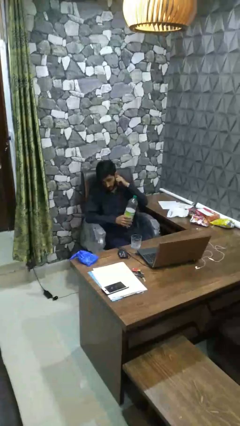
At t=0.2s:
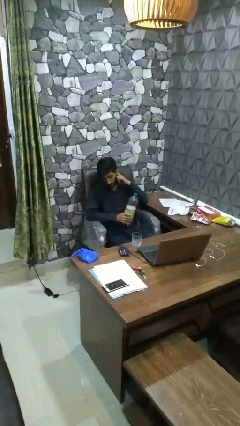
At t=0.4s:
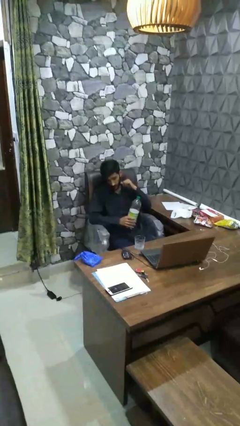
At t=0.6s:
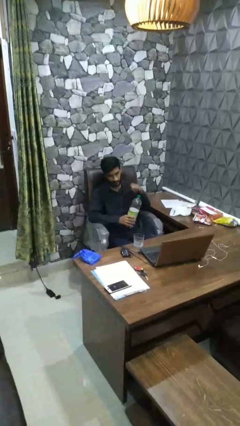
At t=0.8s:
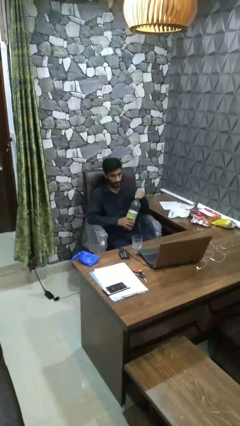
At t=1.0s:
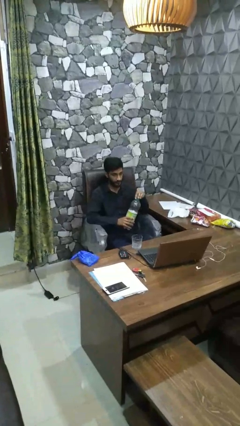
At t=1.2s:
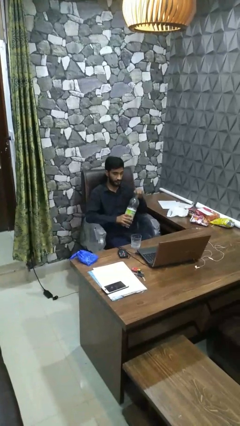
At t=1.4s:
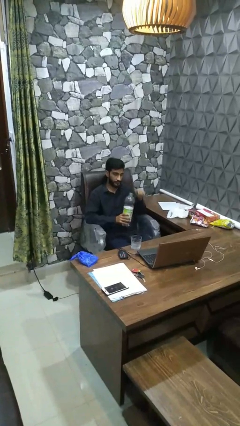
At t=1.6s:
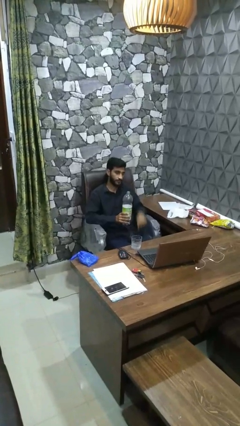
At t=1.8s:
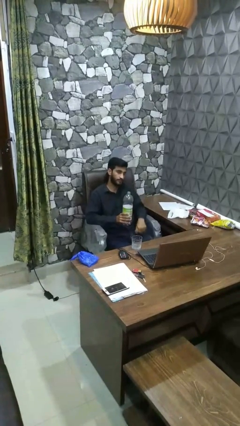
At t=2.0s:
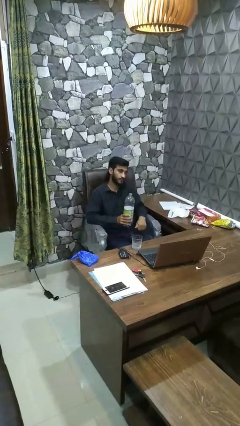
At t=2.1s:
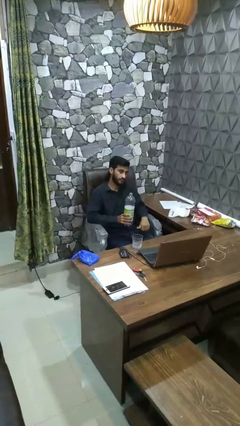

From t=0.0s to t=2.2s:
person unscrews lid from bottle

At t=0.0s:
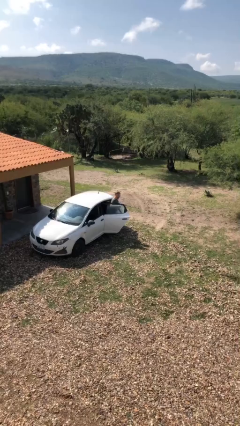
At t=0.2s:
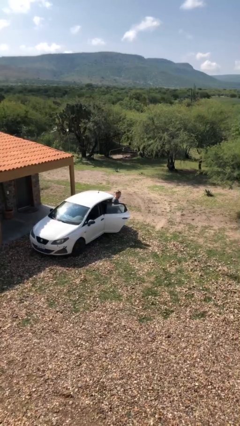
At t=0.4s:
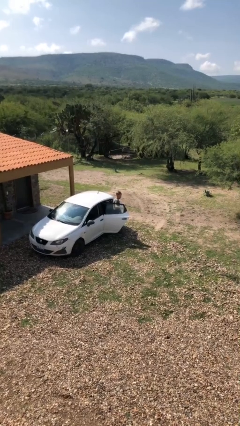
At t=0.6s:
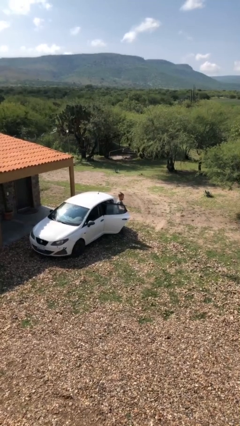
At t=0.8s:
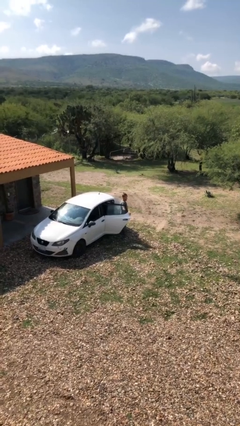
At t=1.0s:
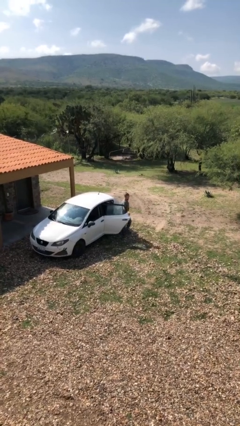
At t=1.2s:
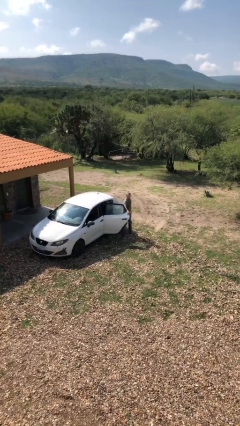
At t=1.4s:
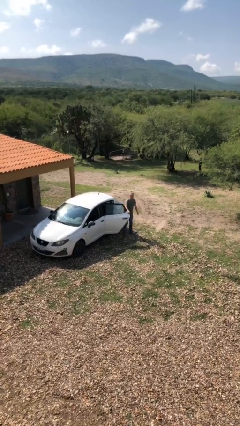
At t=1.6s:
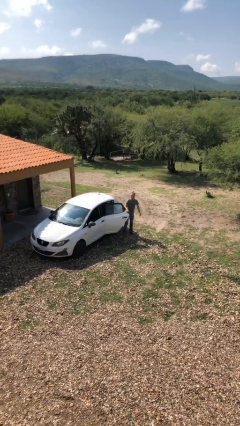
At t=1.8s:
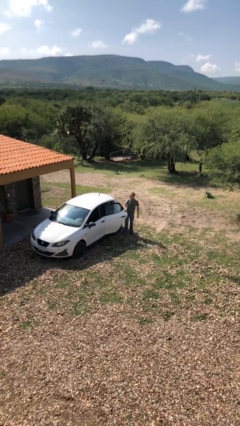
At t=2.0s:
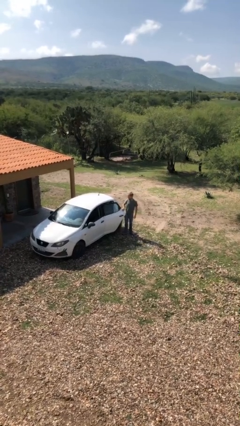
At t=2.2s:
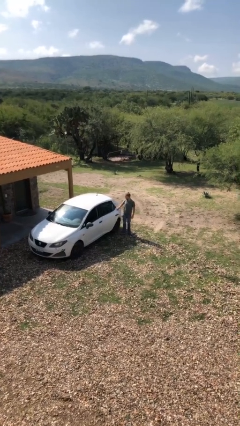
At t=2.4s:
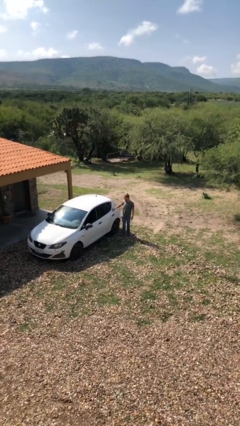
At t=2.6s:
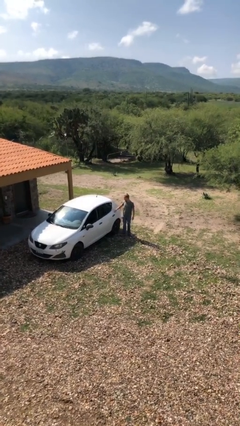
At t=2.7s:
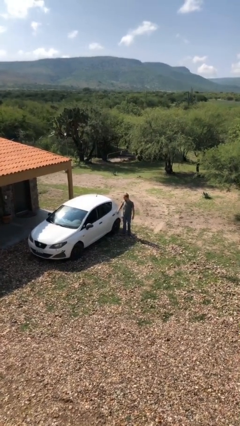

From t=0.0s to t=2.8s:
person closes car door

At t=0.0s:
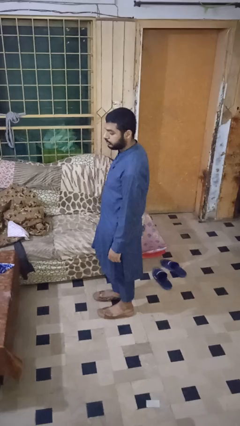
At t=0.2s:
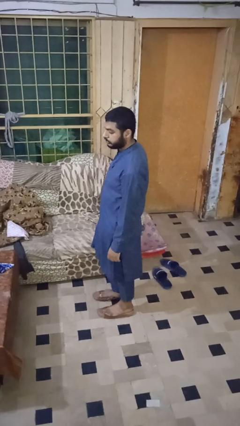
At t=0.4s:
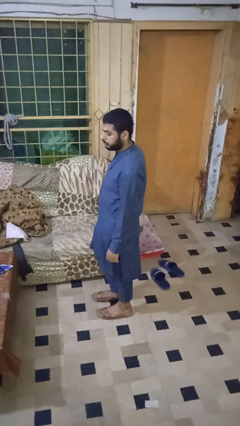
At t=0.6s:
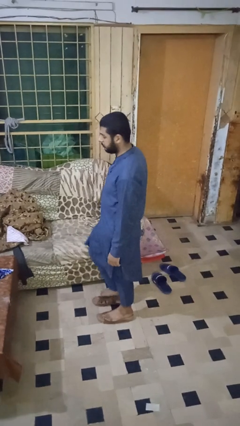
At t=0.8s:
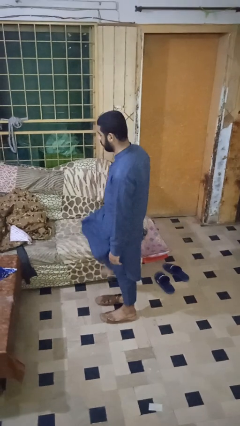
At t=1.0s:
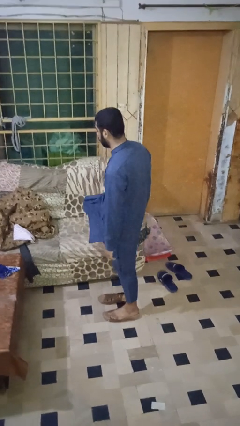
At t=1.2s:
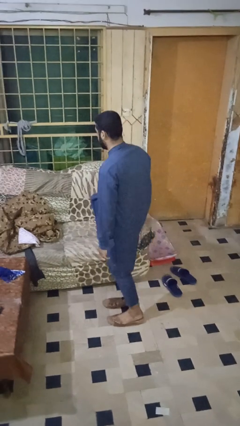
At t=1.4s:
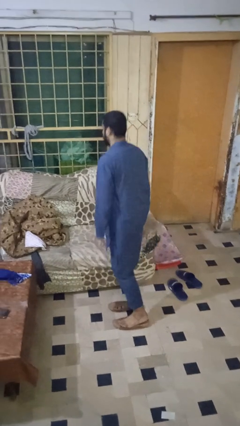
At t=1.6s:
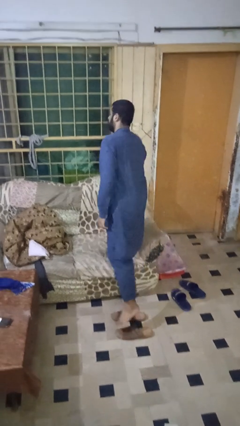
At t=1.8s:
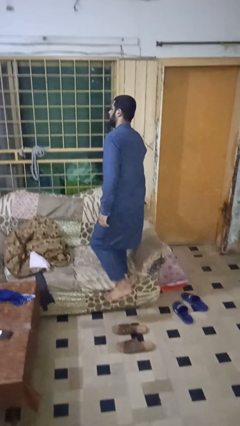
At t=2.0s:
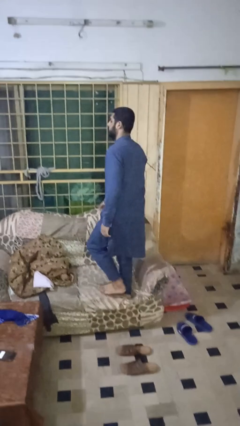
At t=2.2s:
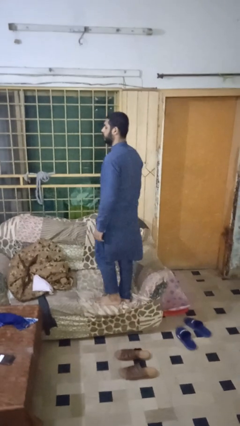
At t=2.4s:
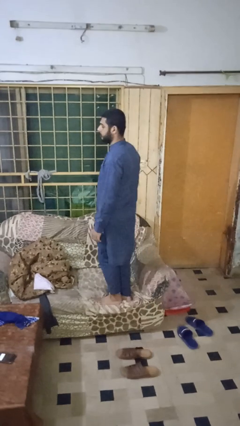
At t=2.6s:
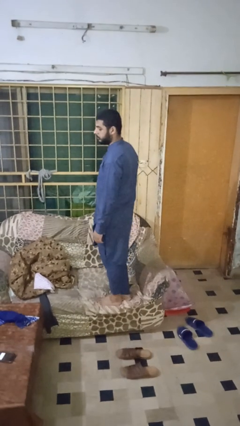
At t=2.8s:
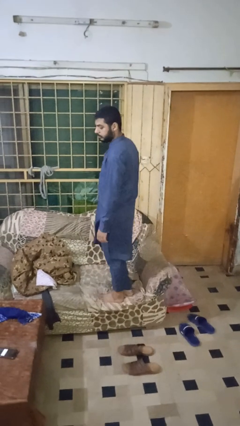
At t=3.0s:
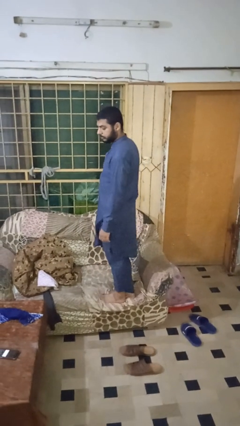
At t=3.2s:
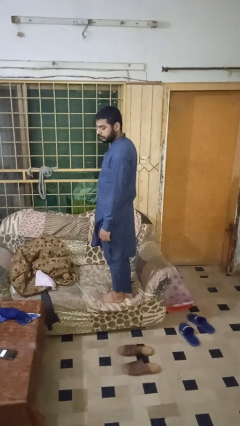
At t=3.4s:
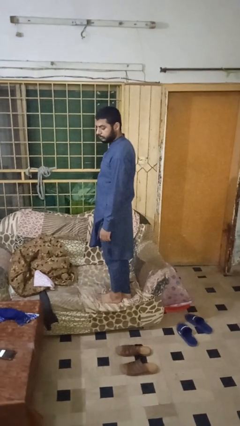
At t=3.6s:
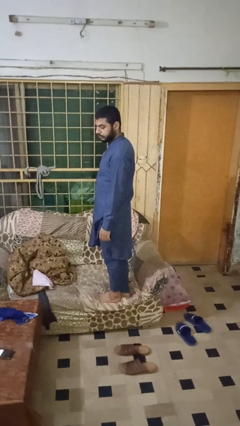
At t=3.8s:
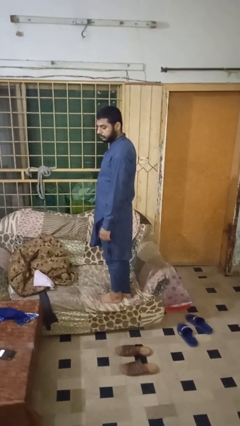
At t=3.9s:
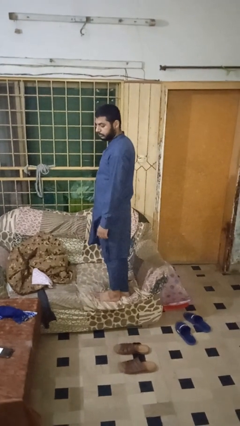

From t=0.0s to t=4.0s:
person climbs on couch

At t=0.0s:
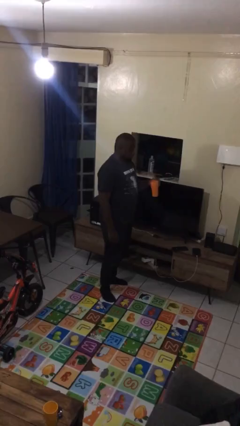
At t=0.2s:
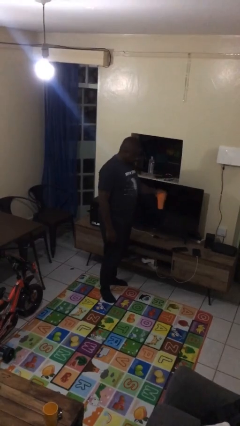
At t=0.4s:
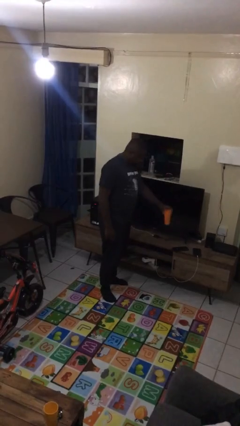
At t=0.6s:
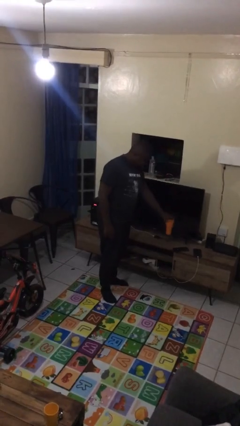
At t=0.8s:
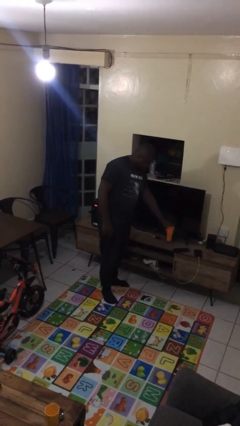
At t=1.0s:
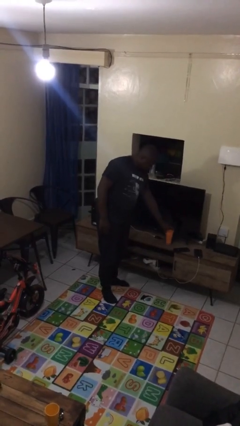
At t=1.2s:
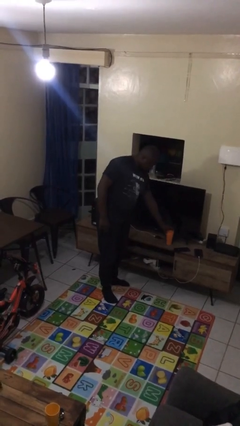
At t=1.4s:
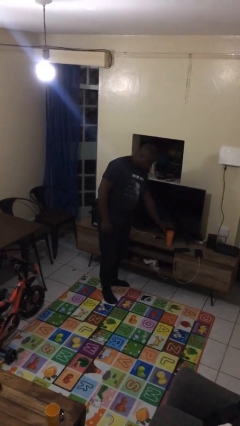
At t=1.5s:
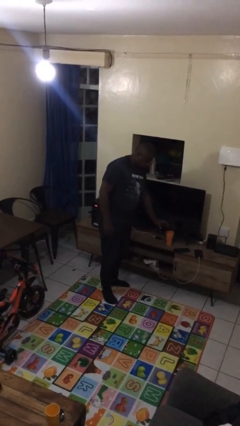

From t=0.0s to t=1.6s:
person puts down object on countertop

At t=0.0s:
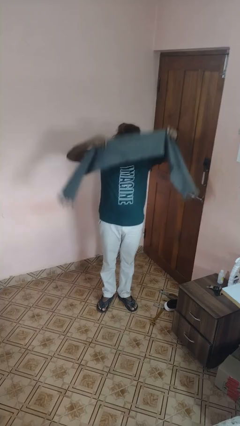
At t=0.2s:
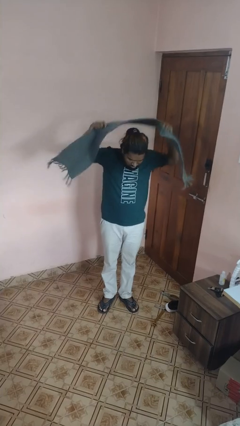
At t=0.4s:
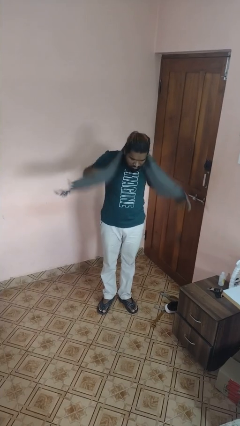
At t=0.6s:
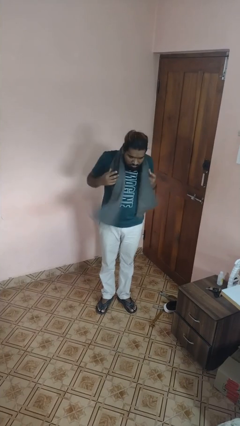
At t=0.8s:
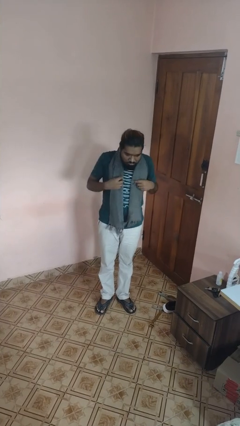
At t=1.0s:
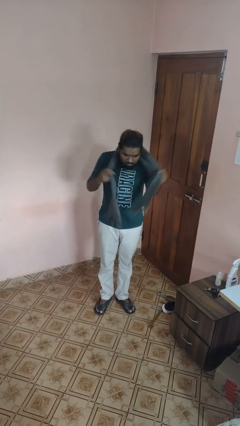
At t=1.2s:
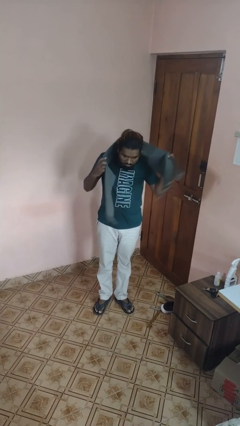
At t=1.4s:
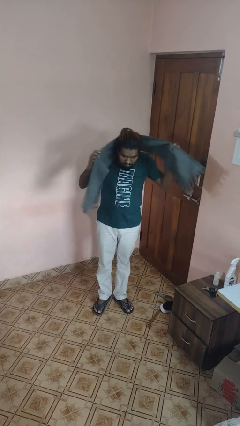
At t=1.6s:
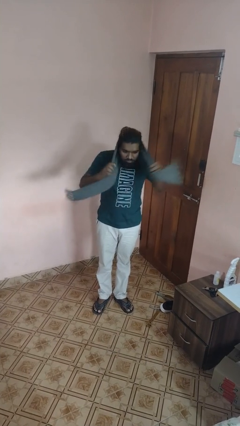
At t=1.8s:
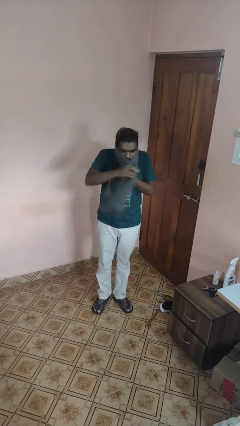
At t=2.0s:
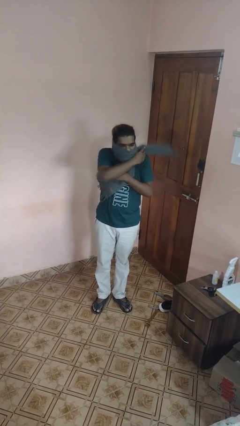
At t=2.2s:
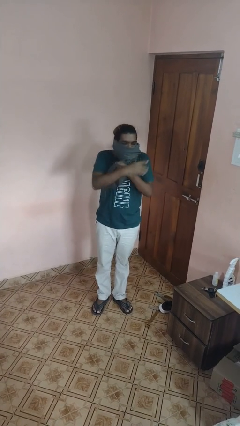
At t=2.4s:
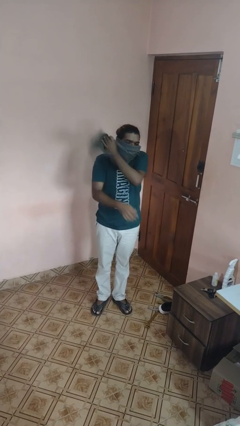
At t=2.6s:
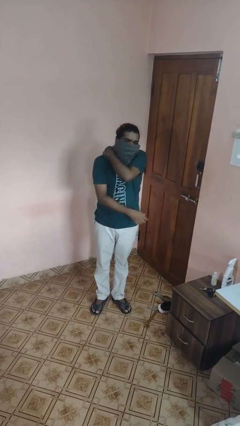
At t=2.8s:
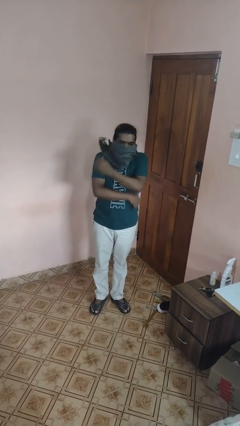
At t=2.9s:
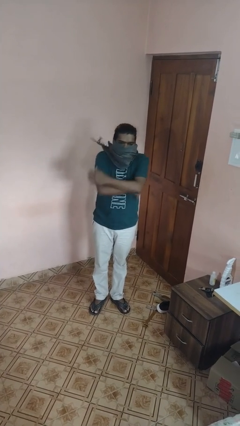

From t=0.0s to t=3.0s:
person puts on scarf

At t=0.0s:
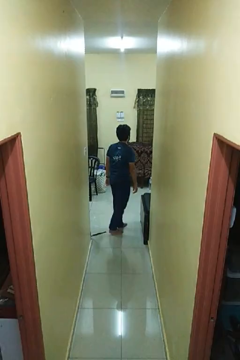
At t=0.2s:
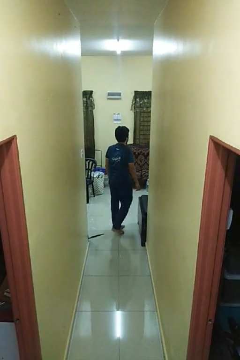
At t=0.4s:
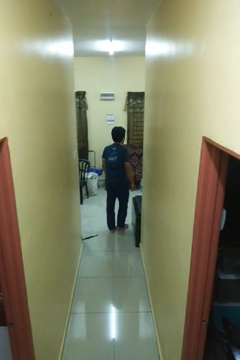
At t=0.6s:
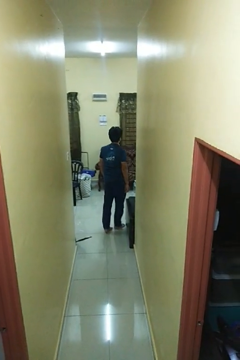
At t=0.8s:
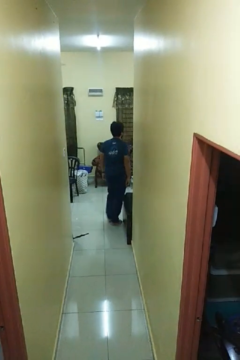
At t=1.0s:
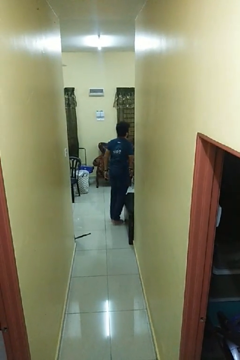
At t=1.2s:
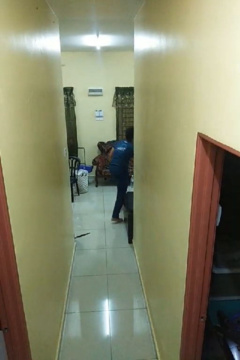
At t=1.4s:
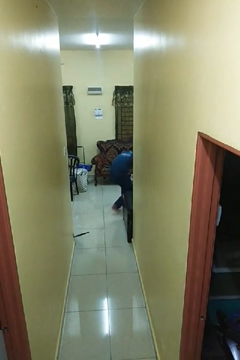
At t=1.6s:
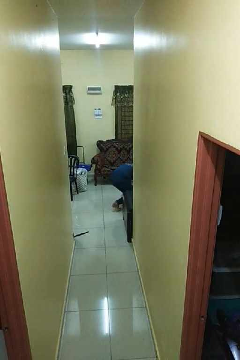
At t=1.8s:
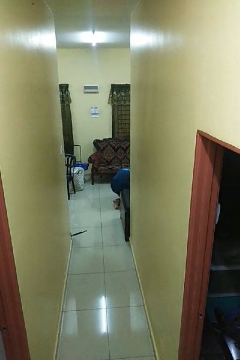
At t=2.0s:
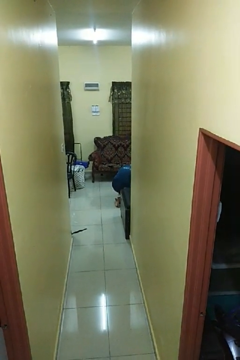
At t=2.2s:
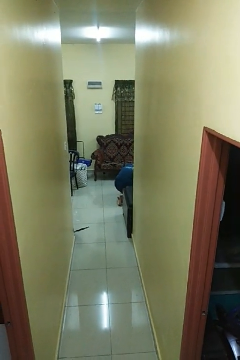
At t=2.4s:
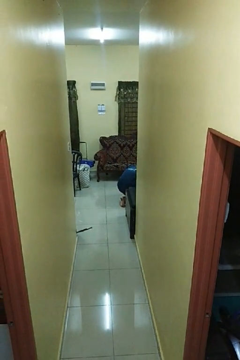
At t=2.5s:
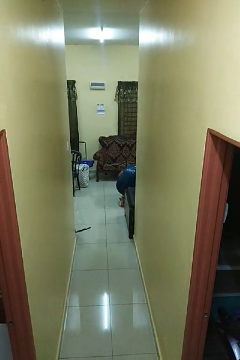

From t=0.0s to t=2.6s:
person trips on object on floor

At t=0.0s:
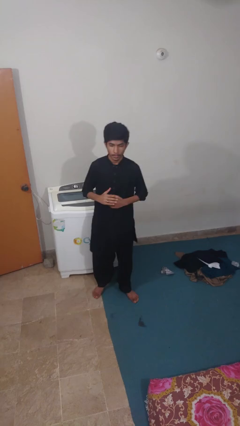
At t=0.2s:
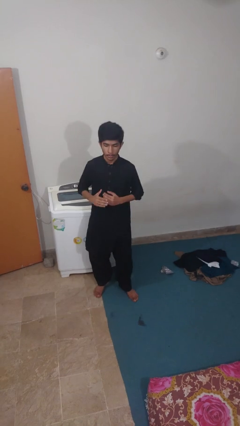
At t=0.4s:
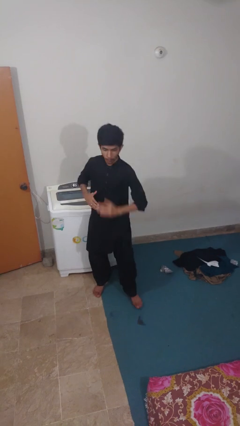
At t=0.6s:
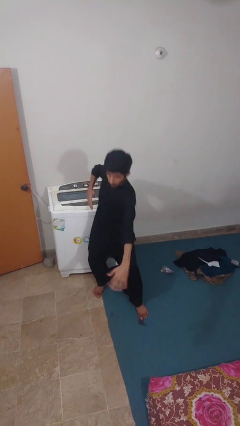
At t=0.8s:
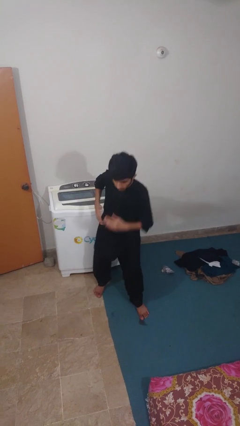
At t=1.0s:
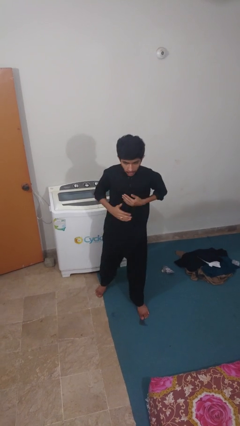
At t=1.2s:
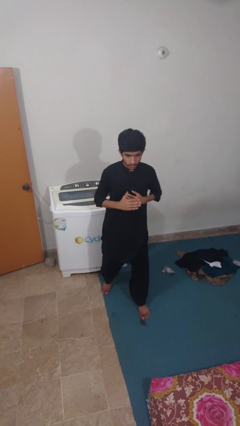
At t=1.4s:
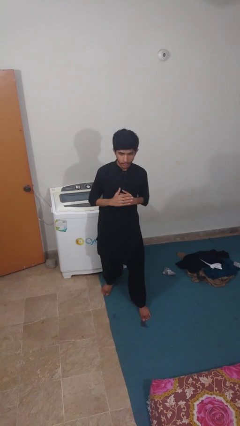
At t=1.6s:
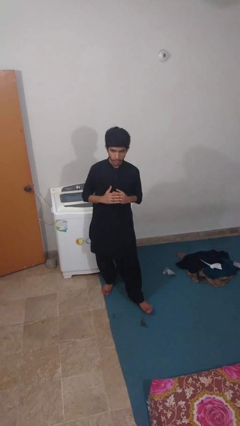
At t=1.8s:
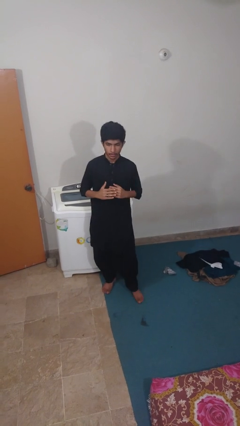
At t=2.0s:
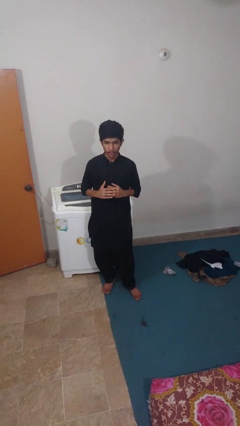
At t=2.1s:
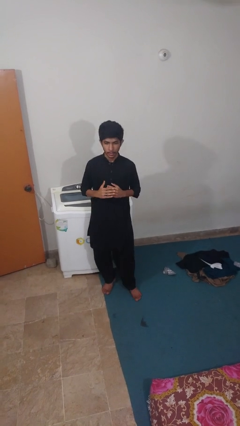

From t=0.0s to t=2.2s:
person karate chop
